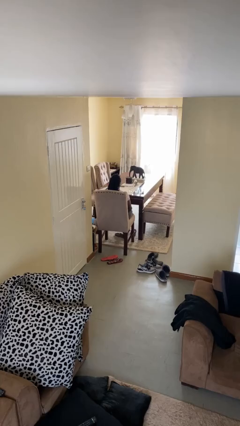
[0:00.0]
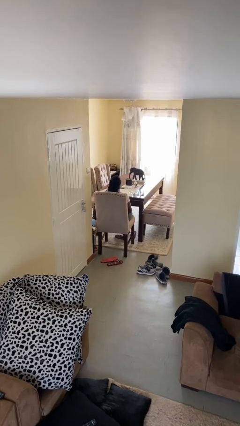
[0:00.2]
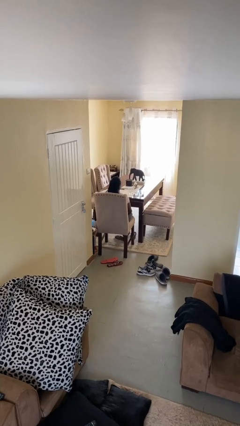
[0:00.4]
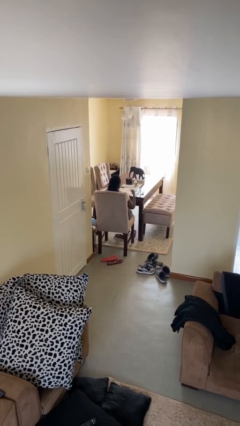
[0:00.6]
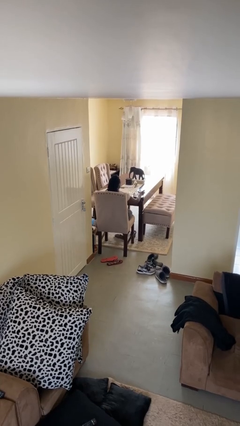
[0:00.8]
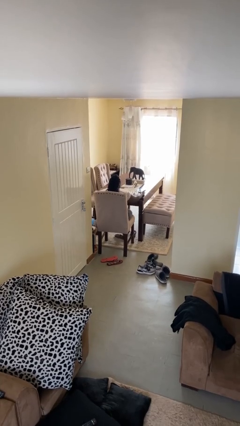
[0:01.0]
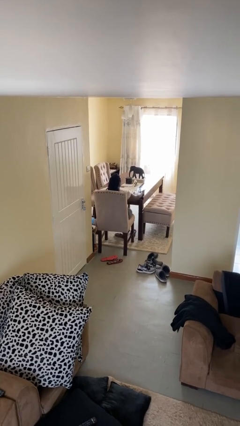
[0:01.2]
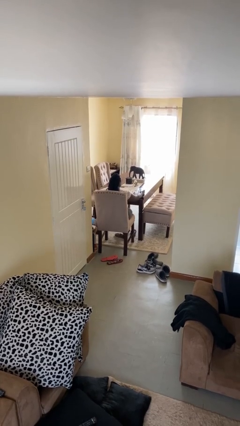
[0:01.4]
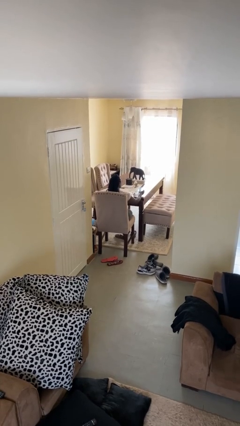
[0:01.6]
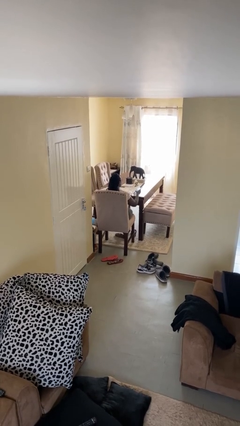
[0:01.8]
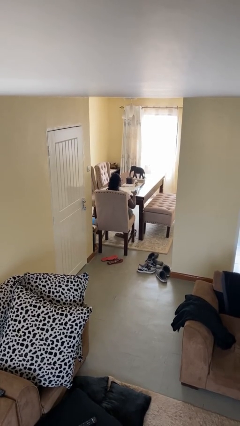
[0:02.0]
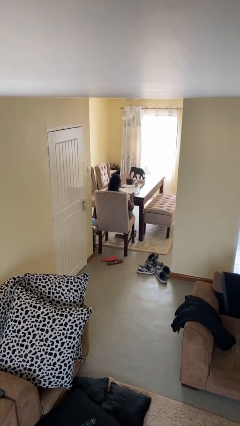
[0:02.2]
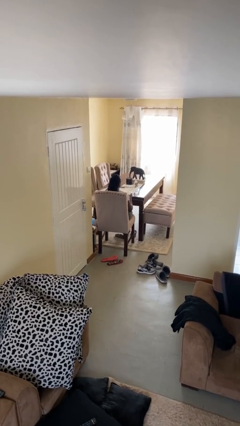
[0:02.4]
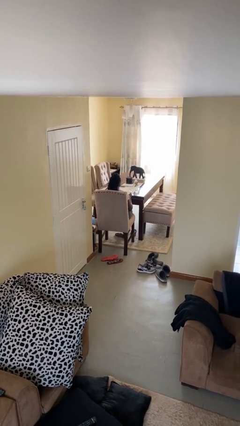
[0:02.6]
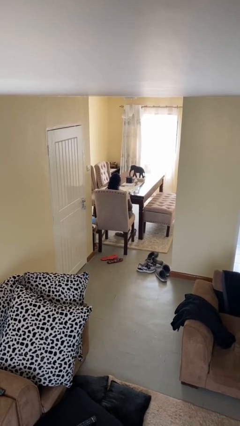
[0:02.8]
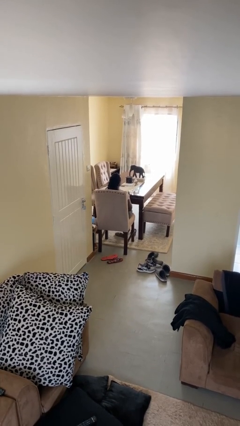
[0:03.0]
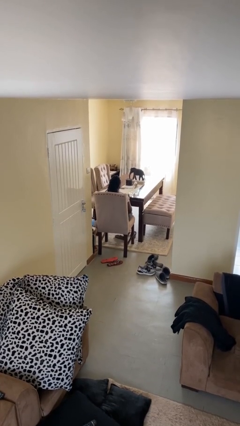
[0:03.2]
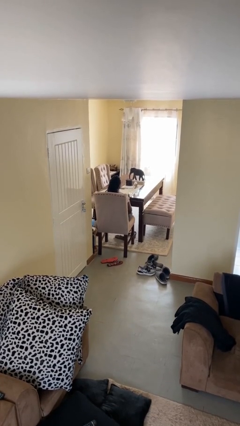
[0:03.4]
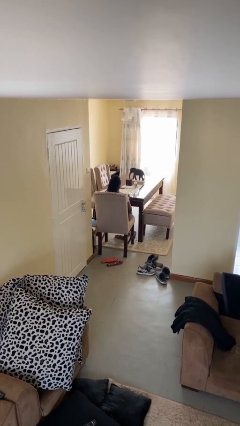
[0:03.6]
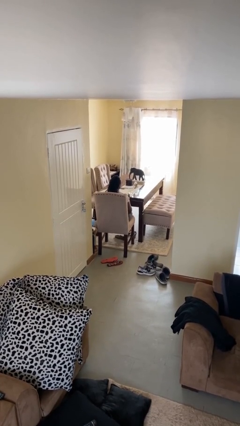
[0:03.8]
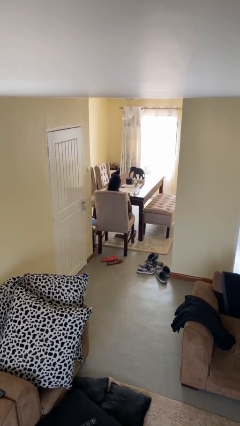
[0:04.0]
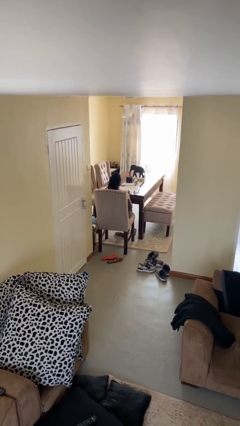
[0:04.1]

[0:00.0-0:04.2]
person picks up object from table

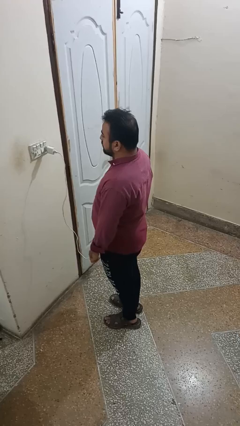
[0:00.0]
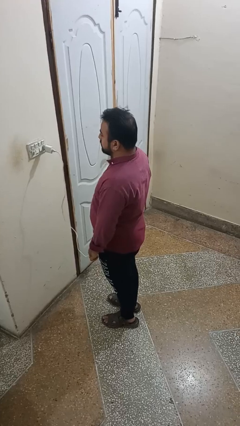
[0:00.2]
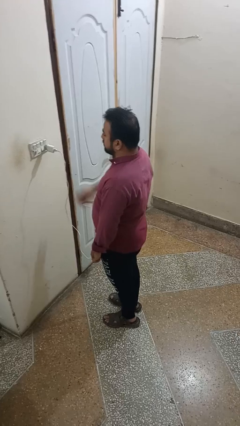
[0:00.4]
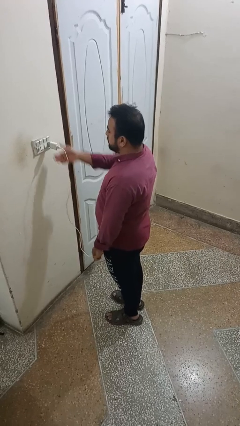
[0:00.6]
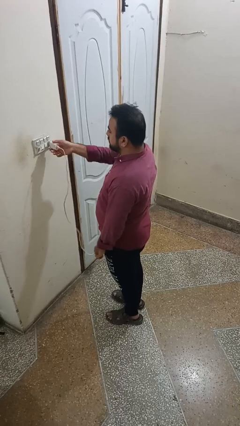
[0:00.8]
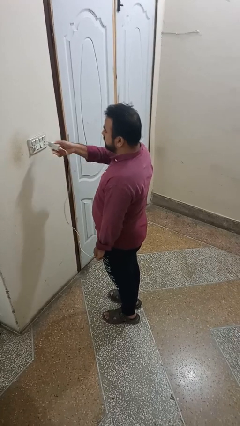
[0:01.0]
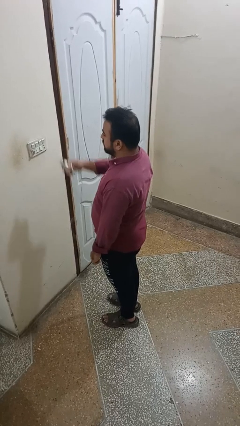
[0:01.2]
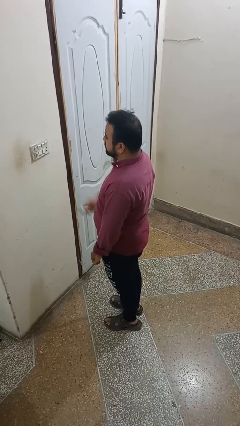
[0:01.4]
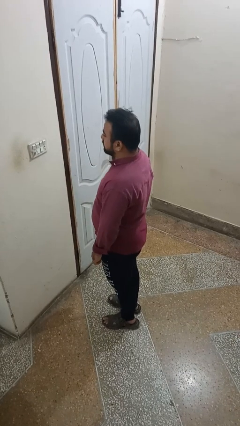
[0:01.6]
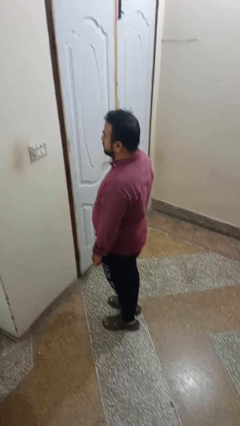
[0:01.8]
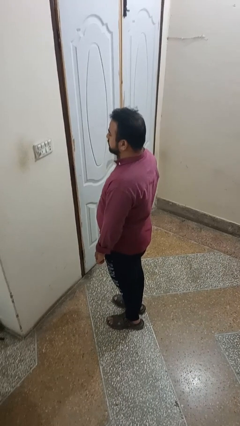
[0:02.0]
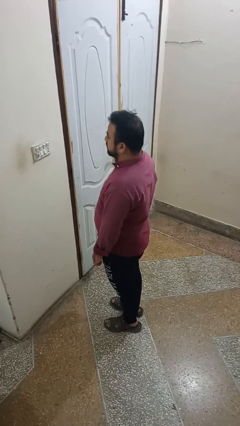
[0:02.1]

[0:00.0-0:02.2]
person unplugs from electrical socket

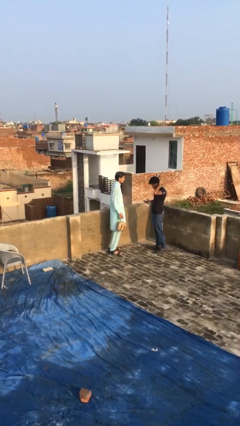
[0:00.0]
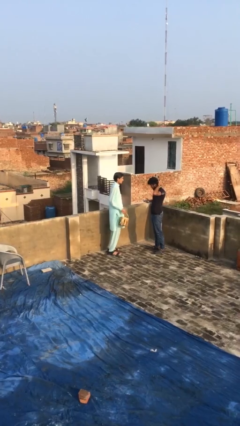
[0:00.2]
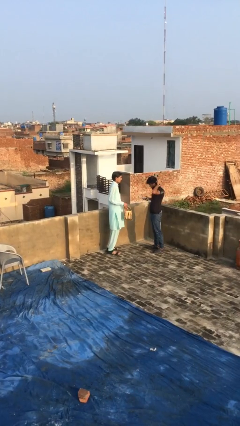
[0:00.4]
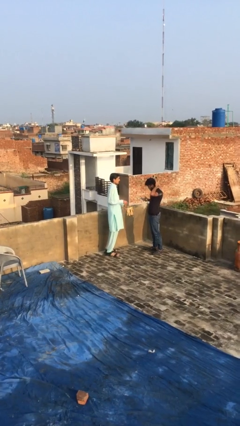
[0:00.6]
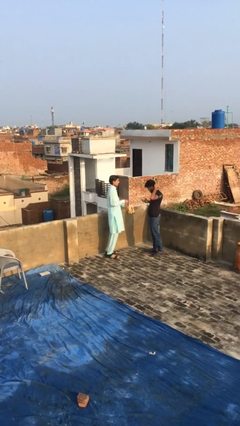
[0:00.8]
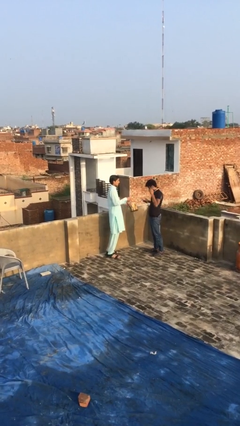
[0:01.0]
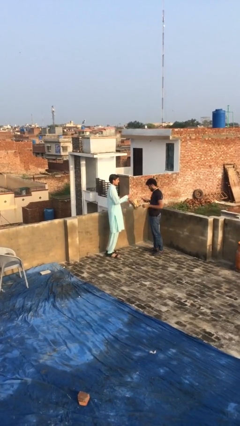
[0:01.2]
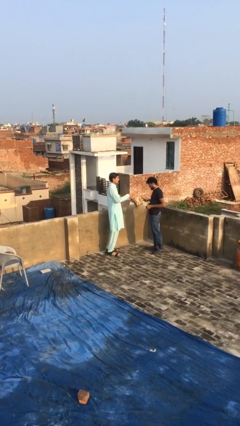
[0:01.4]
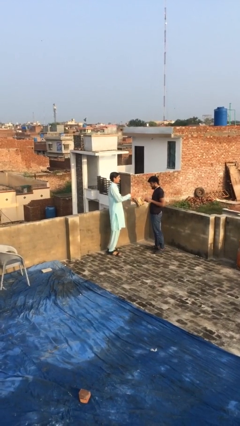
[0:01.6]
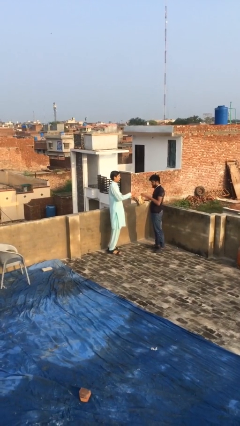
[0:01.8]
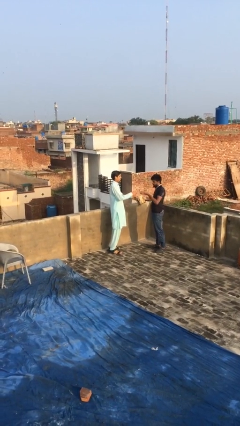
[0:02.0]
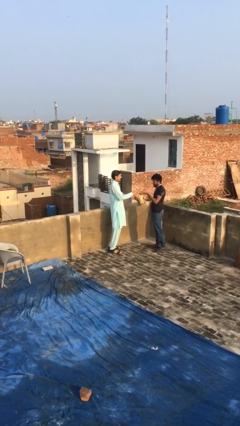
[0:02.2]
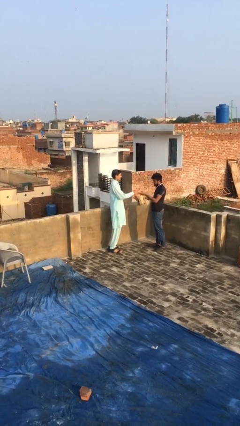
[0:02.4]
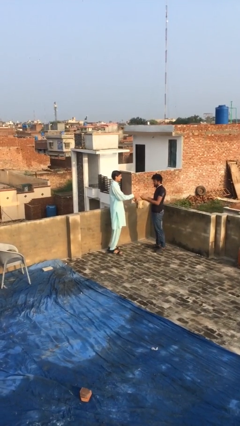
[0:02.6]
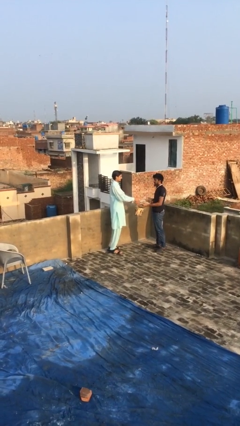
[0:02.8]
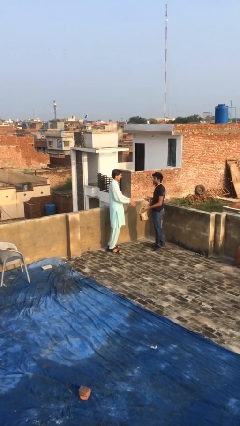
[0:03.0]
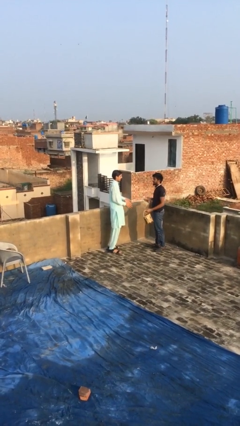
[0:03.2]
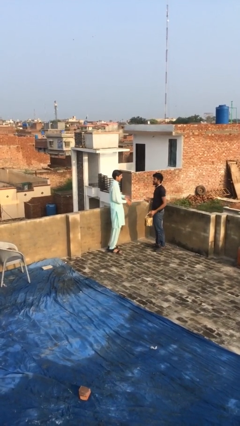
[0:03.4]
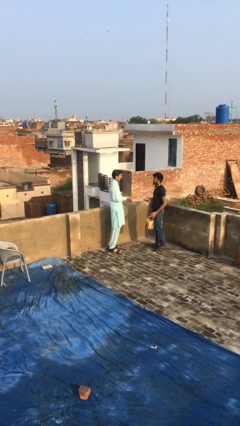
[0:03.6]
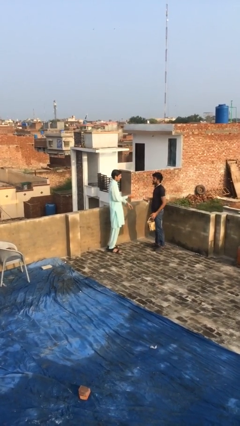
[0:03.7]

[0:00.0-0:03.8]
person transfers object to person

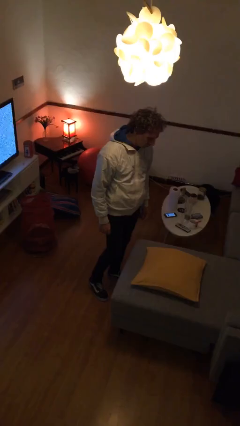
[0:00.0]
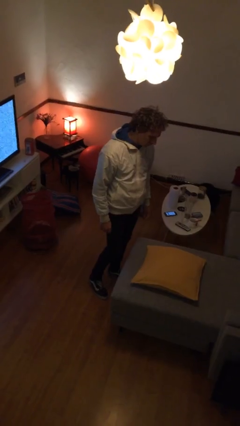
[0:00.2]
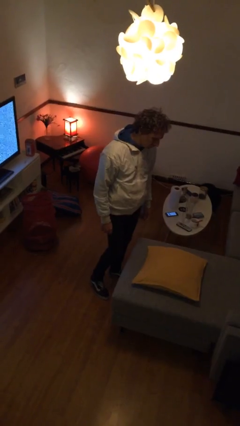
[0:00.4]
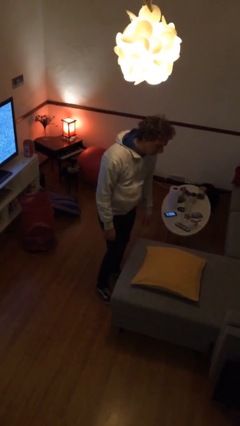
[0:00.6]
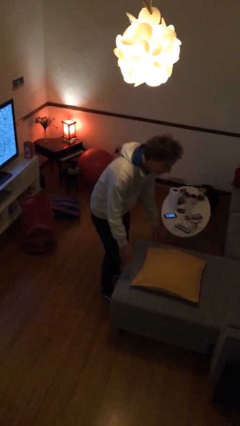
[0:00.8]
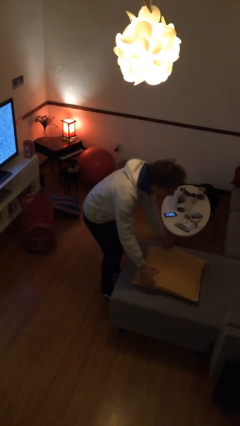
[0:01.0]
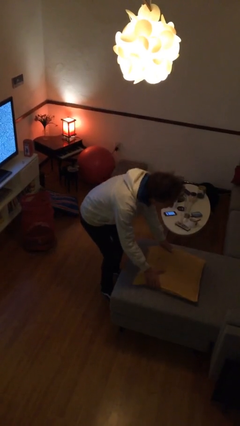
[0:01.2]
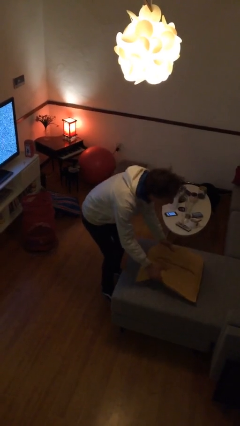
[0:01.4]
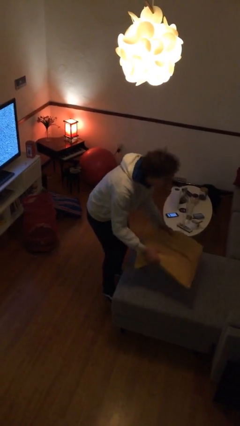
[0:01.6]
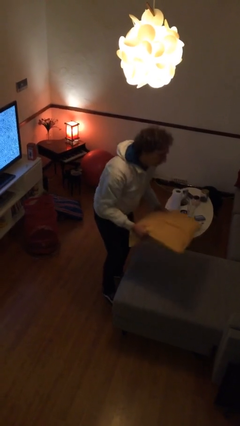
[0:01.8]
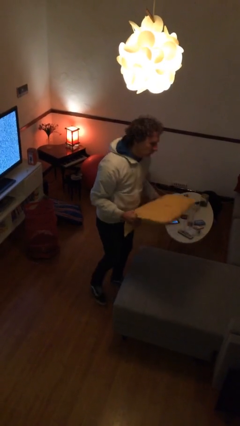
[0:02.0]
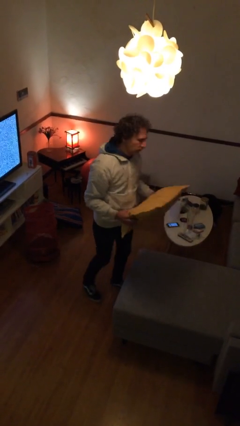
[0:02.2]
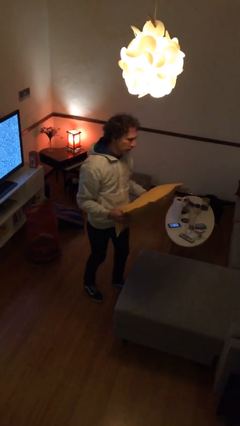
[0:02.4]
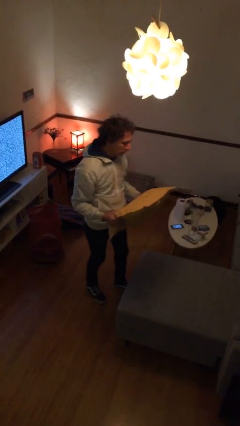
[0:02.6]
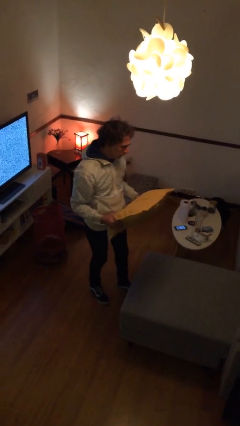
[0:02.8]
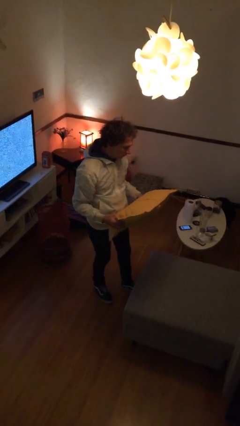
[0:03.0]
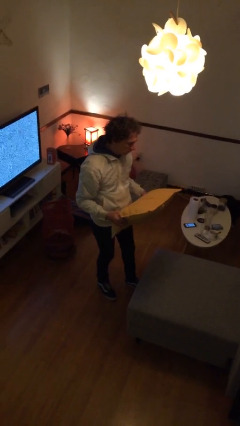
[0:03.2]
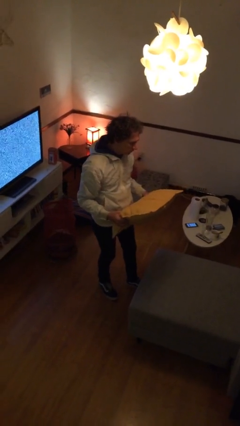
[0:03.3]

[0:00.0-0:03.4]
person picks up object from couch

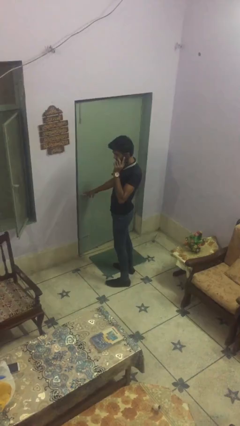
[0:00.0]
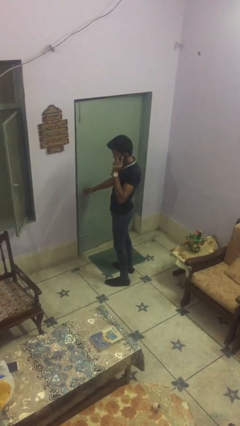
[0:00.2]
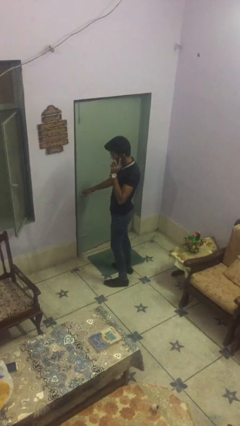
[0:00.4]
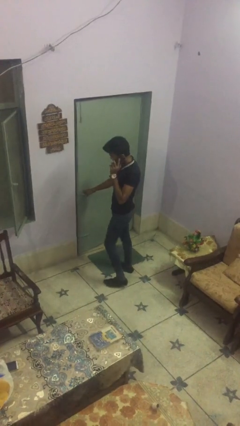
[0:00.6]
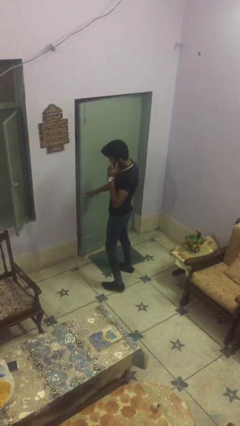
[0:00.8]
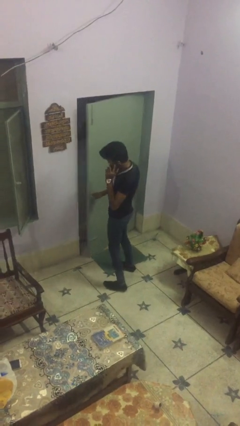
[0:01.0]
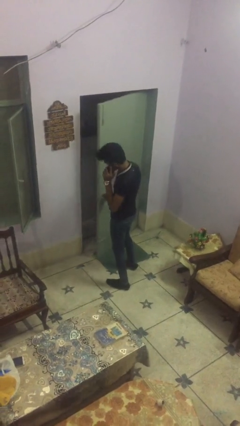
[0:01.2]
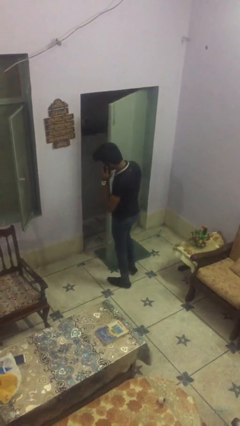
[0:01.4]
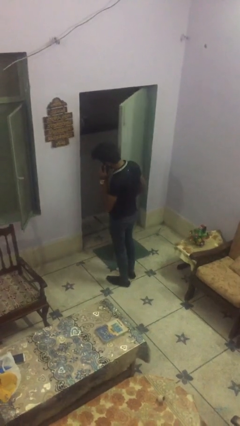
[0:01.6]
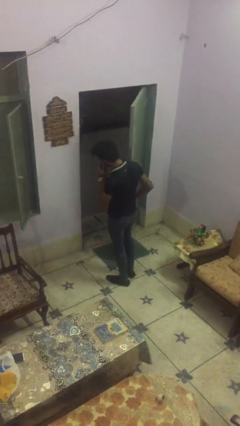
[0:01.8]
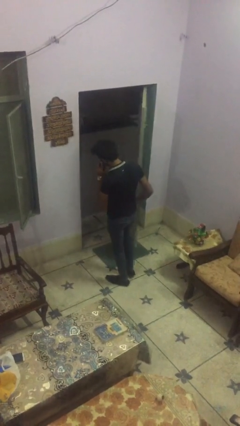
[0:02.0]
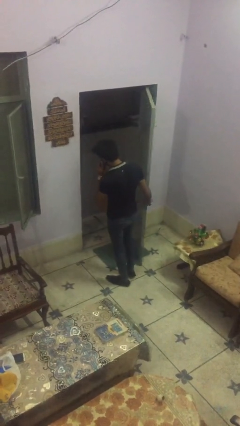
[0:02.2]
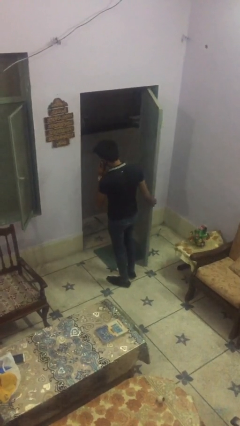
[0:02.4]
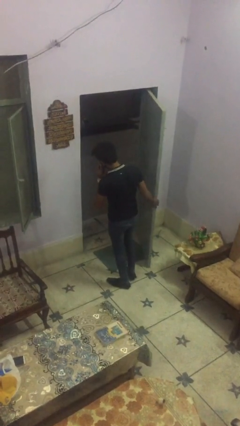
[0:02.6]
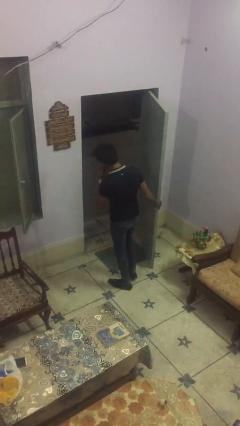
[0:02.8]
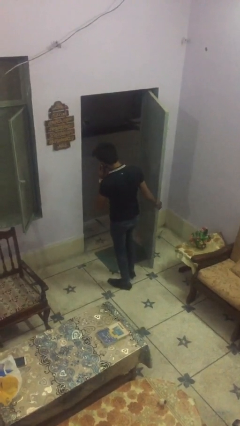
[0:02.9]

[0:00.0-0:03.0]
person opens facility door

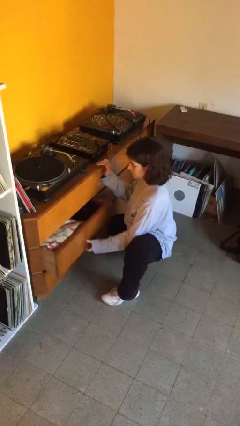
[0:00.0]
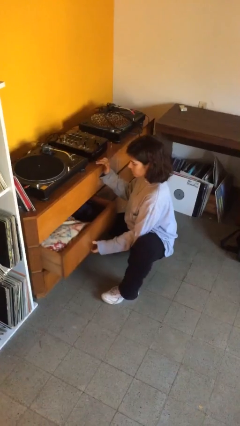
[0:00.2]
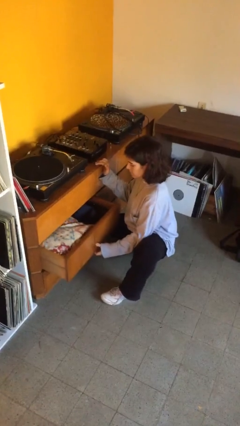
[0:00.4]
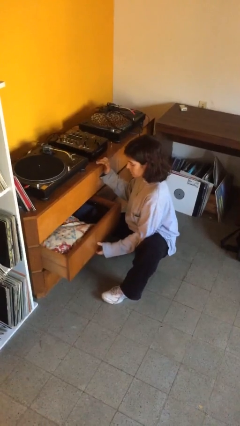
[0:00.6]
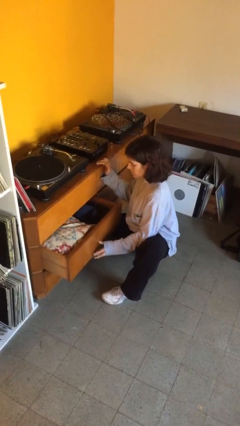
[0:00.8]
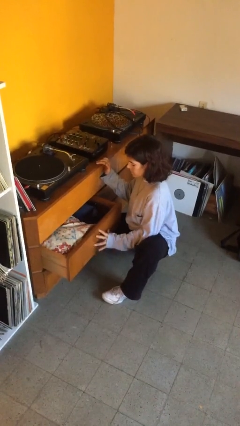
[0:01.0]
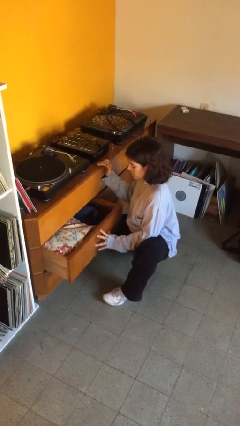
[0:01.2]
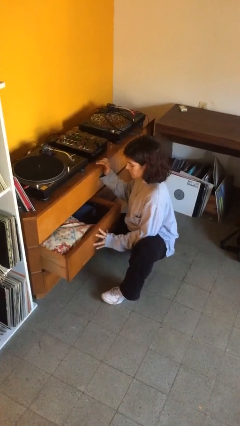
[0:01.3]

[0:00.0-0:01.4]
person opens dresser drawer
